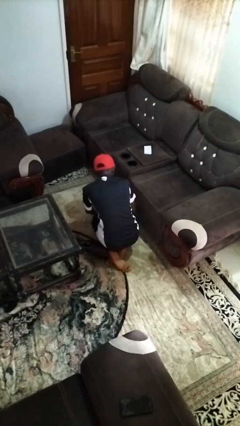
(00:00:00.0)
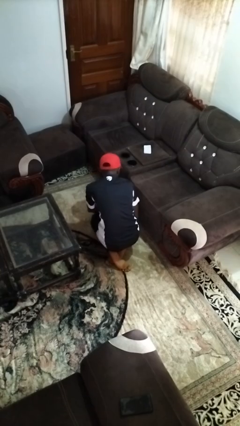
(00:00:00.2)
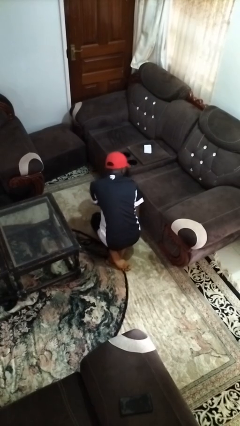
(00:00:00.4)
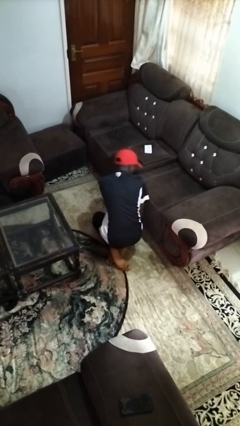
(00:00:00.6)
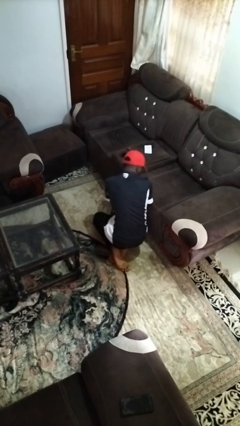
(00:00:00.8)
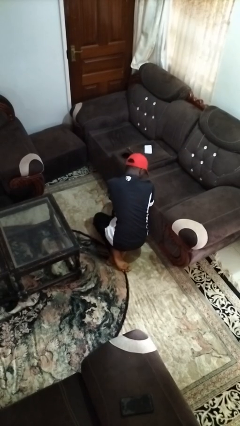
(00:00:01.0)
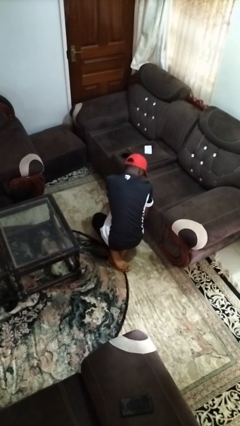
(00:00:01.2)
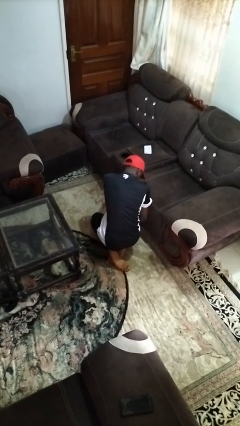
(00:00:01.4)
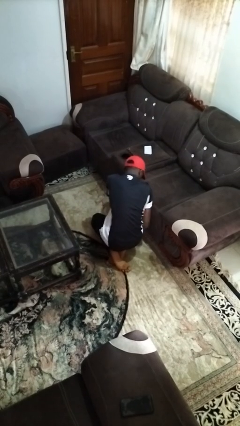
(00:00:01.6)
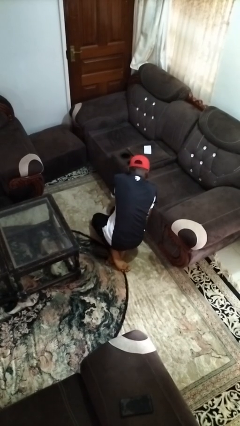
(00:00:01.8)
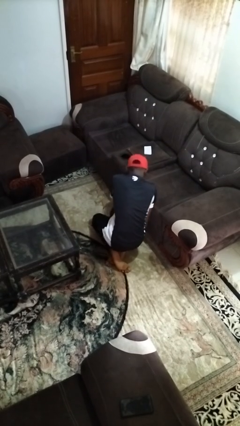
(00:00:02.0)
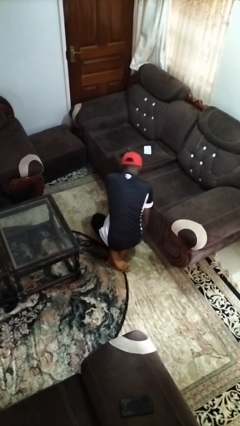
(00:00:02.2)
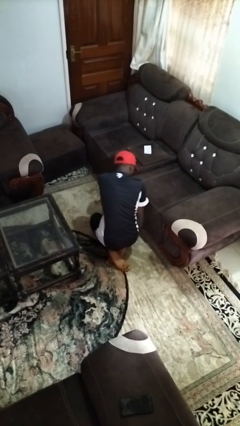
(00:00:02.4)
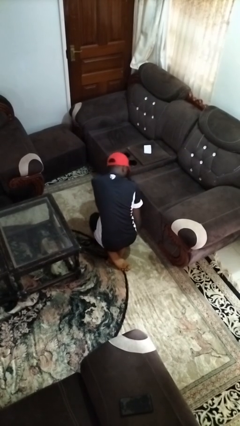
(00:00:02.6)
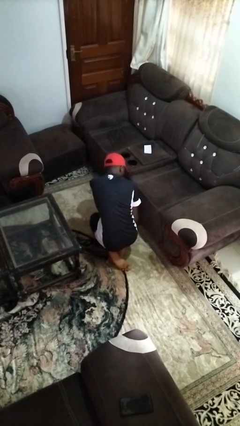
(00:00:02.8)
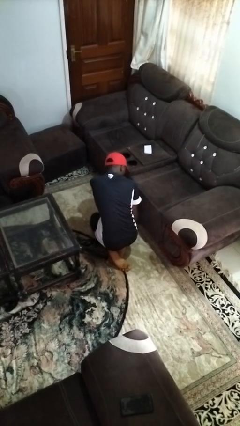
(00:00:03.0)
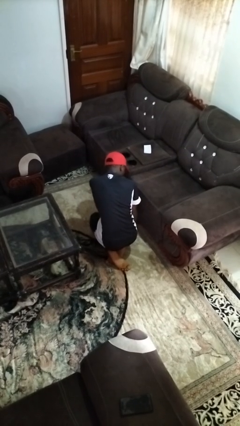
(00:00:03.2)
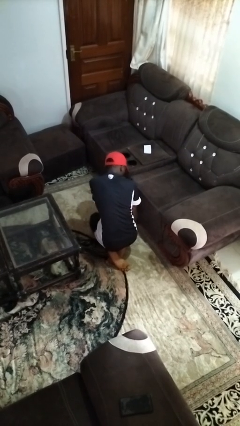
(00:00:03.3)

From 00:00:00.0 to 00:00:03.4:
person searches under couch

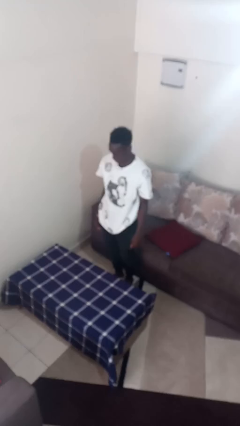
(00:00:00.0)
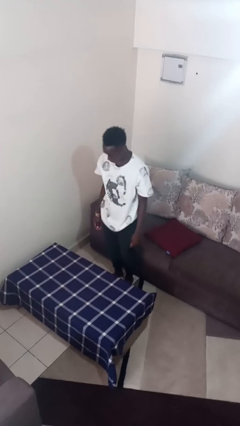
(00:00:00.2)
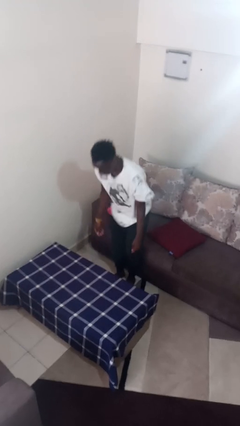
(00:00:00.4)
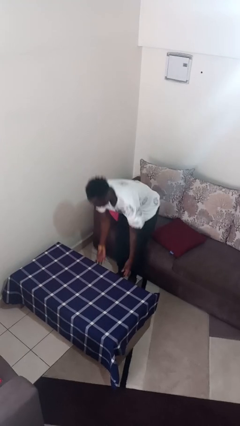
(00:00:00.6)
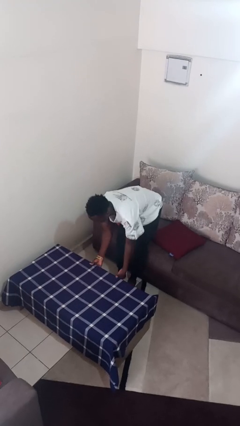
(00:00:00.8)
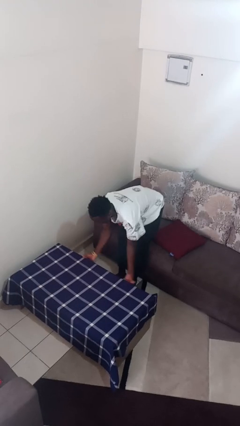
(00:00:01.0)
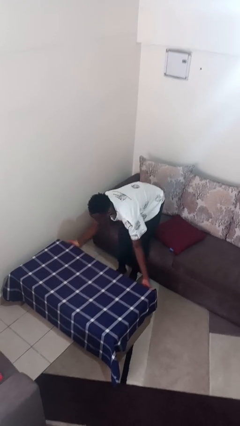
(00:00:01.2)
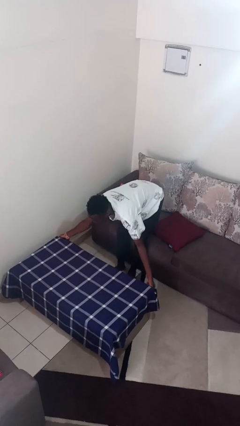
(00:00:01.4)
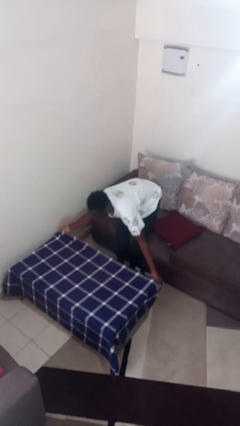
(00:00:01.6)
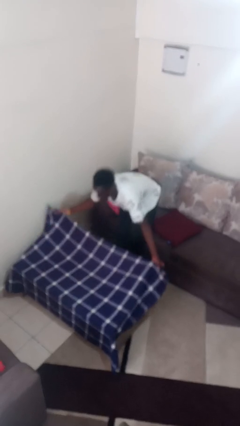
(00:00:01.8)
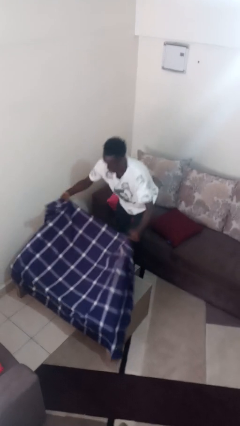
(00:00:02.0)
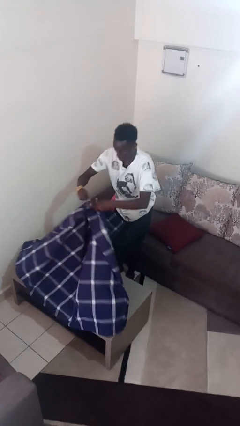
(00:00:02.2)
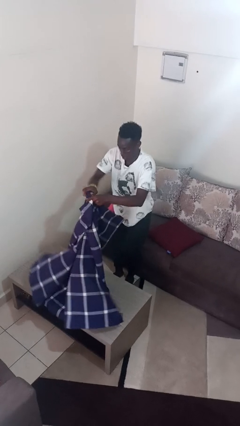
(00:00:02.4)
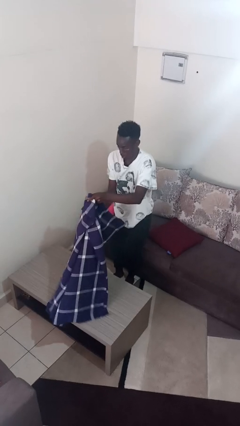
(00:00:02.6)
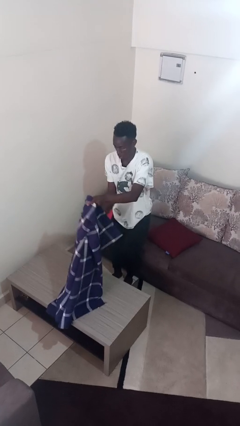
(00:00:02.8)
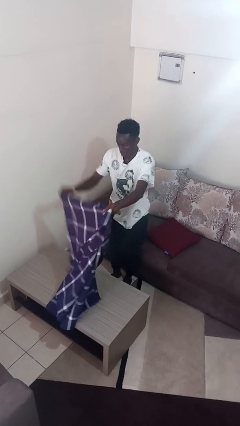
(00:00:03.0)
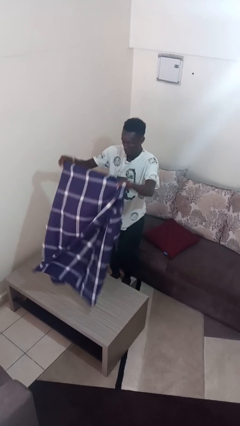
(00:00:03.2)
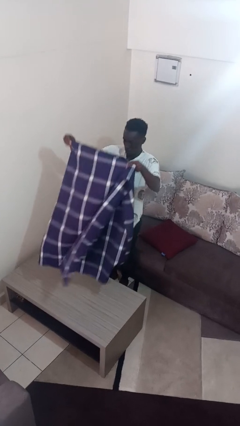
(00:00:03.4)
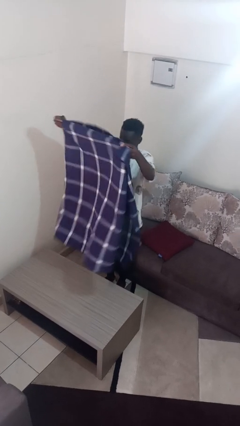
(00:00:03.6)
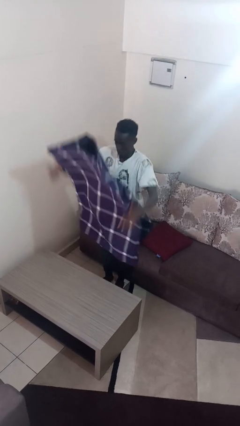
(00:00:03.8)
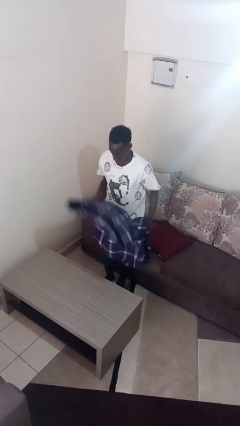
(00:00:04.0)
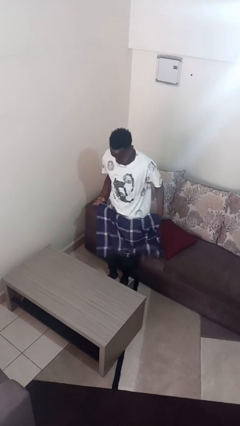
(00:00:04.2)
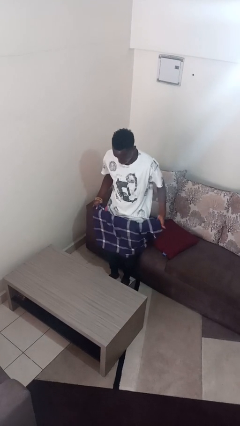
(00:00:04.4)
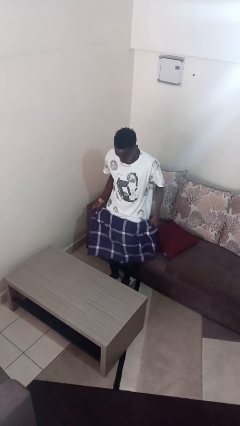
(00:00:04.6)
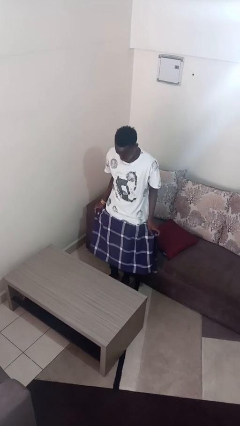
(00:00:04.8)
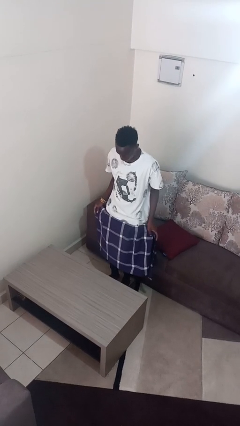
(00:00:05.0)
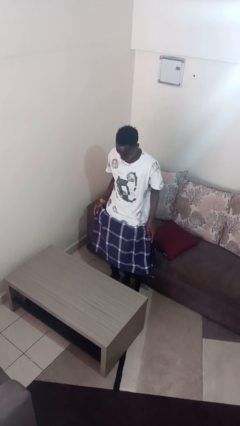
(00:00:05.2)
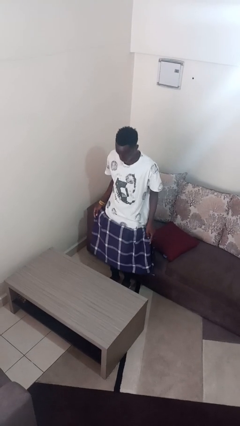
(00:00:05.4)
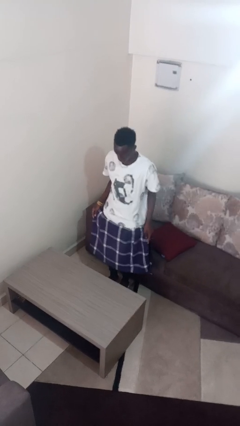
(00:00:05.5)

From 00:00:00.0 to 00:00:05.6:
person folds tablecloth

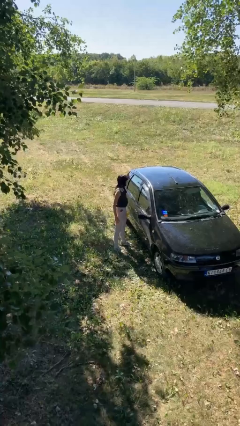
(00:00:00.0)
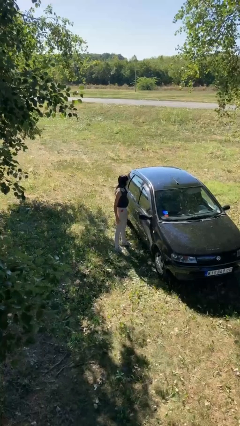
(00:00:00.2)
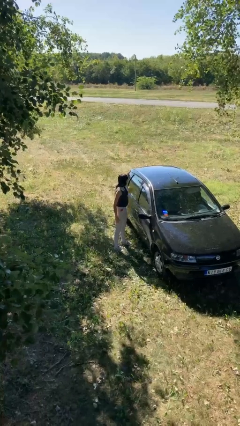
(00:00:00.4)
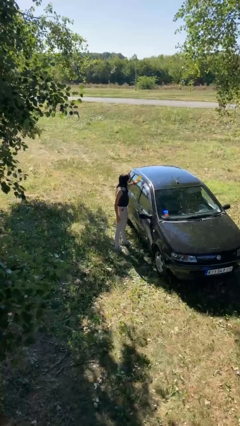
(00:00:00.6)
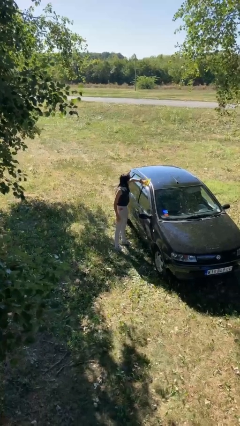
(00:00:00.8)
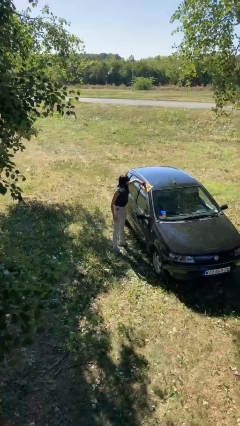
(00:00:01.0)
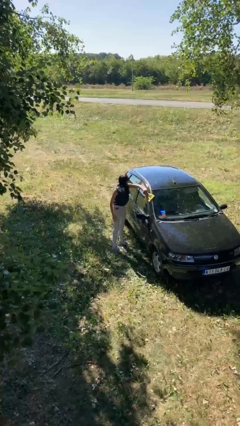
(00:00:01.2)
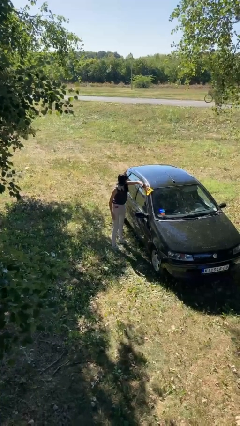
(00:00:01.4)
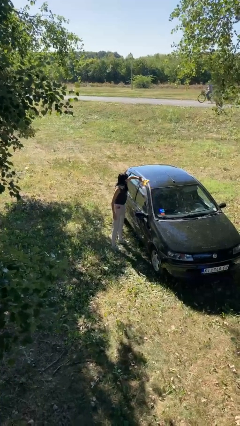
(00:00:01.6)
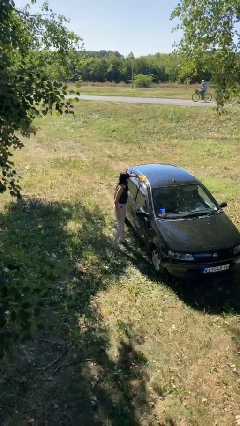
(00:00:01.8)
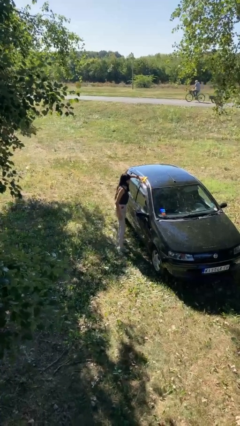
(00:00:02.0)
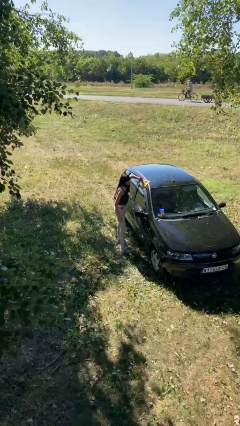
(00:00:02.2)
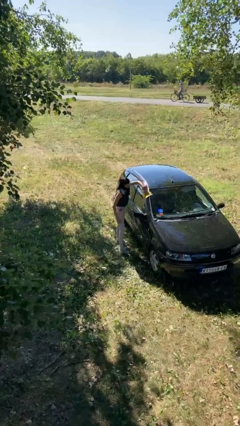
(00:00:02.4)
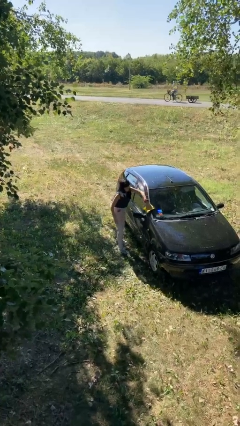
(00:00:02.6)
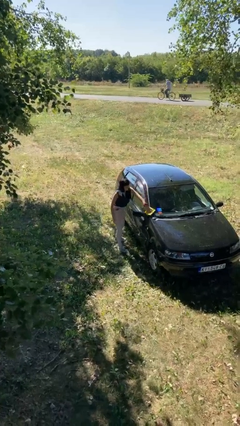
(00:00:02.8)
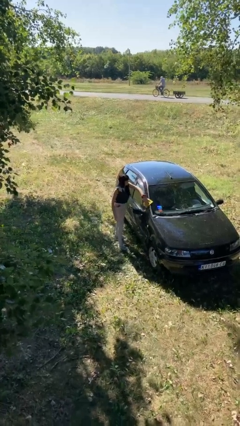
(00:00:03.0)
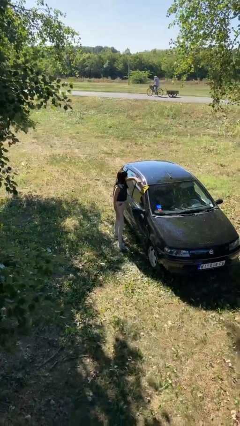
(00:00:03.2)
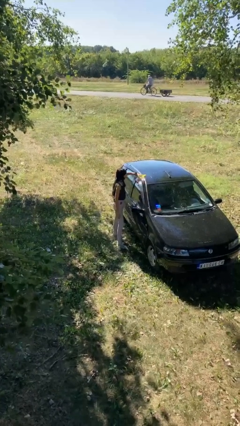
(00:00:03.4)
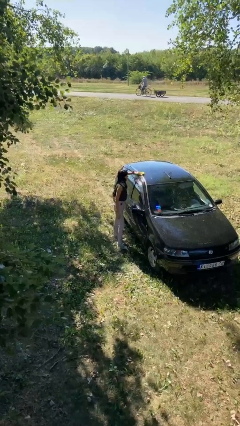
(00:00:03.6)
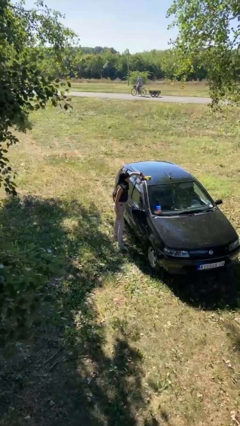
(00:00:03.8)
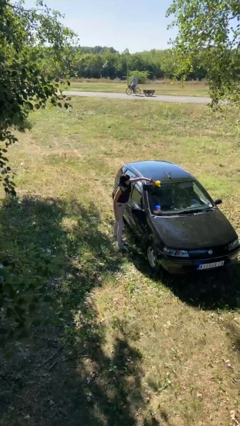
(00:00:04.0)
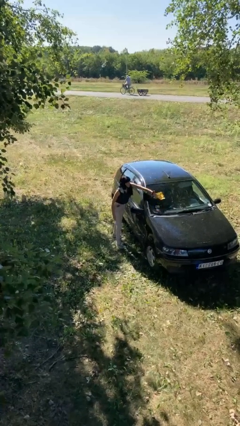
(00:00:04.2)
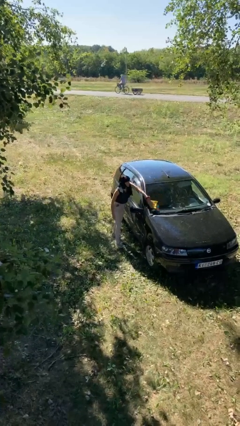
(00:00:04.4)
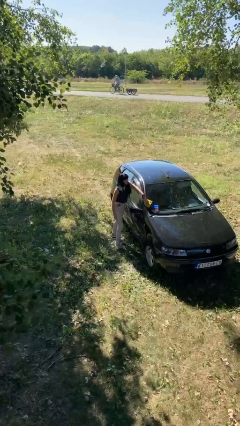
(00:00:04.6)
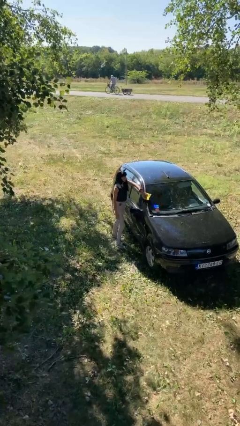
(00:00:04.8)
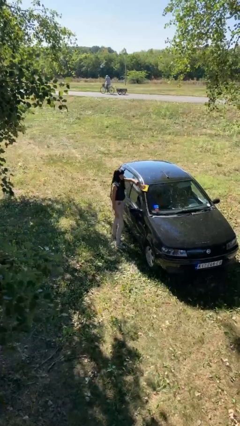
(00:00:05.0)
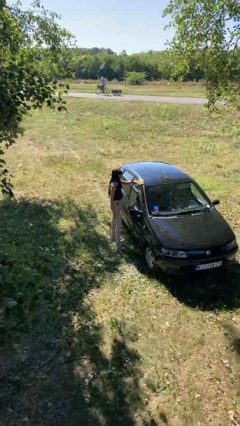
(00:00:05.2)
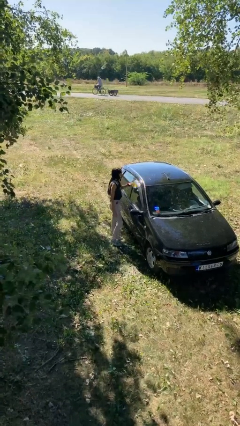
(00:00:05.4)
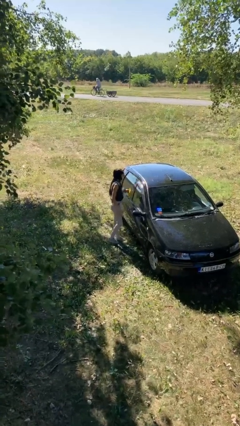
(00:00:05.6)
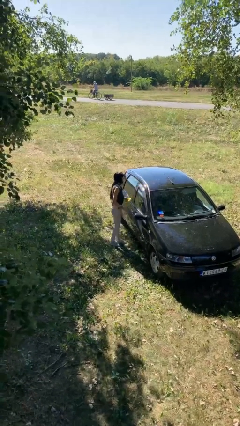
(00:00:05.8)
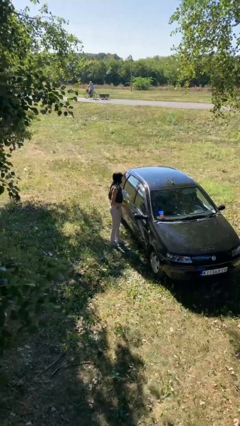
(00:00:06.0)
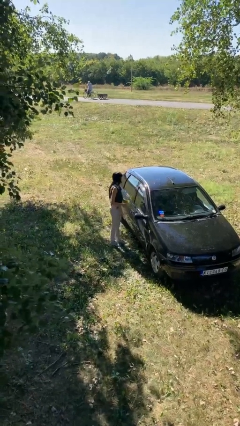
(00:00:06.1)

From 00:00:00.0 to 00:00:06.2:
person polishes car with rag

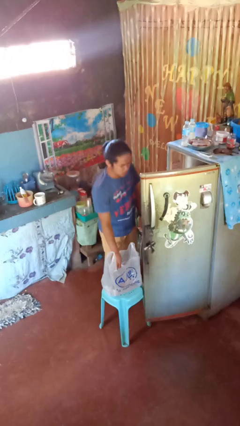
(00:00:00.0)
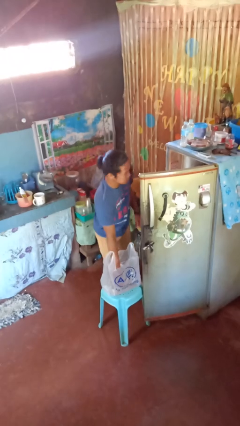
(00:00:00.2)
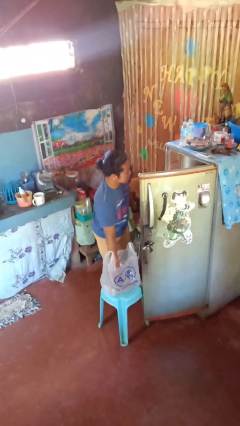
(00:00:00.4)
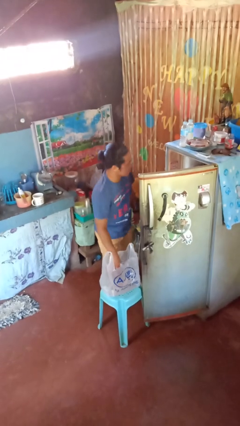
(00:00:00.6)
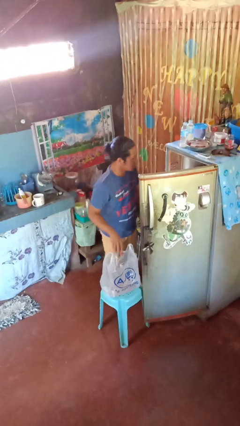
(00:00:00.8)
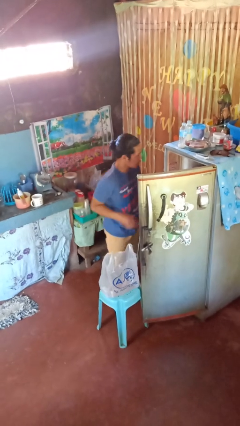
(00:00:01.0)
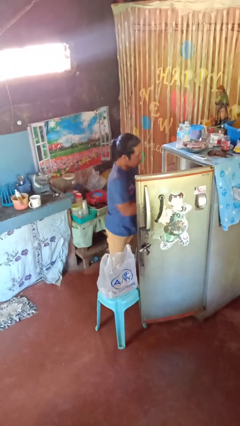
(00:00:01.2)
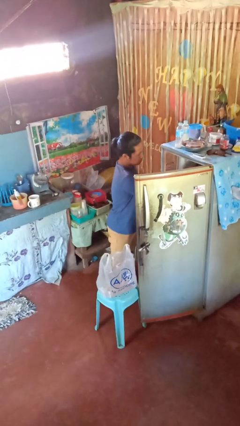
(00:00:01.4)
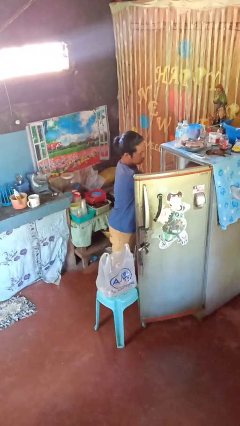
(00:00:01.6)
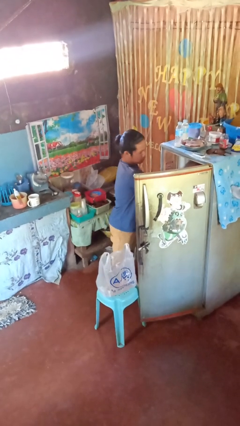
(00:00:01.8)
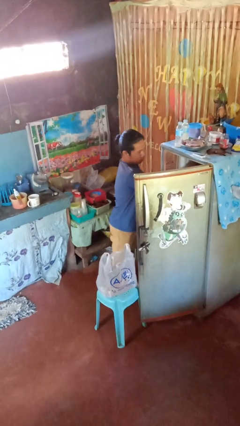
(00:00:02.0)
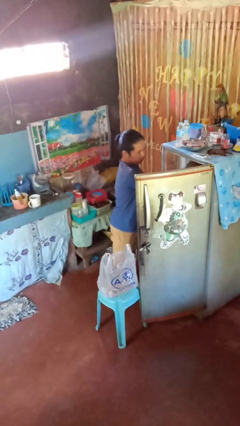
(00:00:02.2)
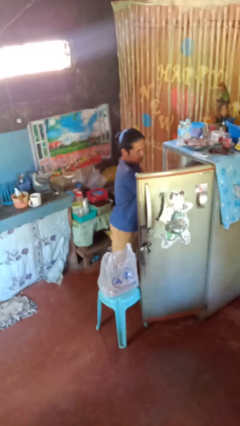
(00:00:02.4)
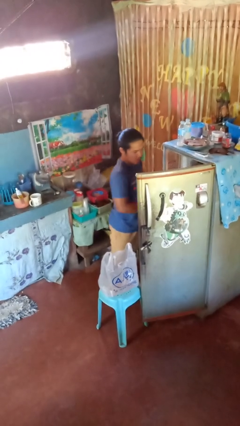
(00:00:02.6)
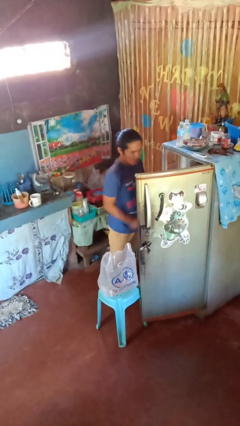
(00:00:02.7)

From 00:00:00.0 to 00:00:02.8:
person loads groceries into refrigerator
